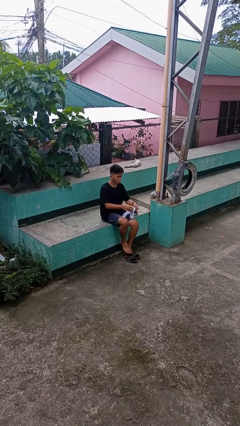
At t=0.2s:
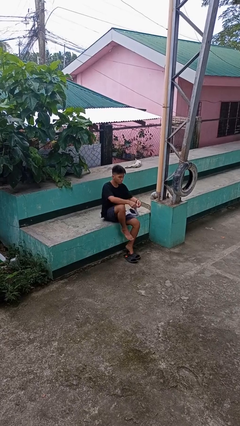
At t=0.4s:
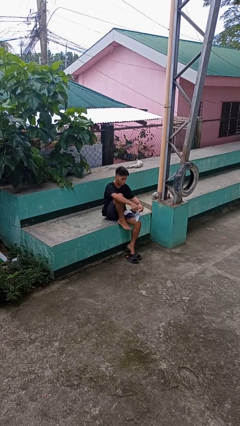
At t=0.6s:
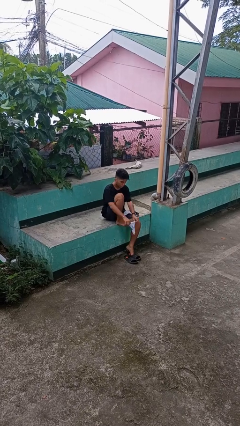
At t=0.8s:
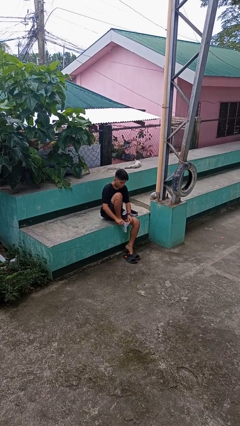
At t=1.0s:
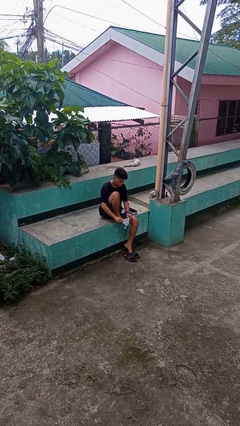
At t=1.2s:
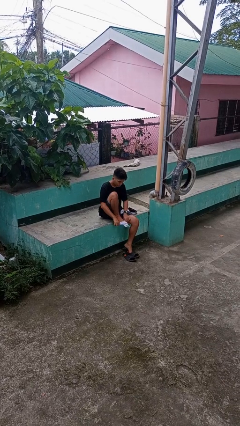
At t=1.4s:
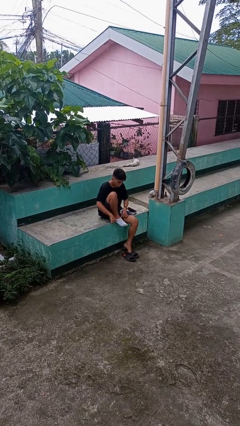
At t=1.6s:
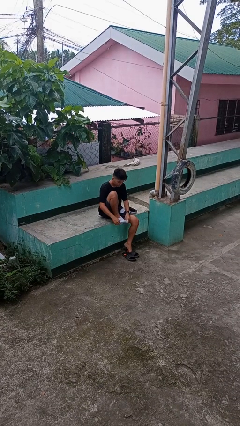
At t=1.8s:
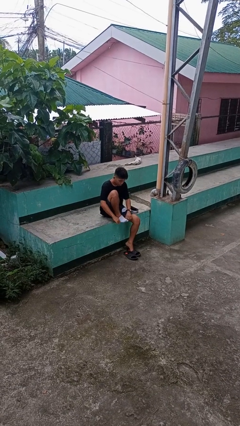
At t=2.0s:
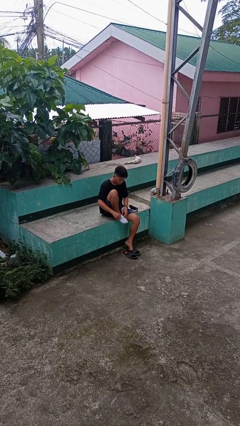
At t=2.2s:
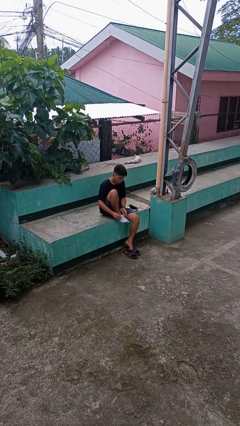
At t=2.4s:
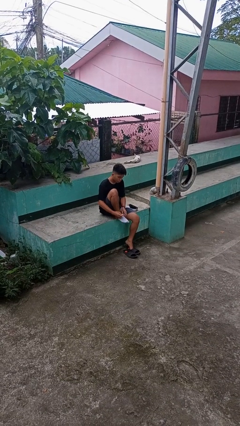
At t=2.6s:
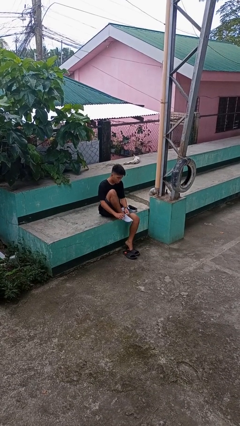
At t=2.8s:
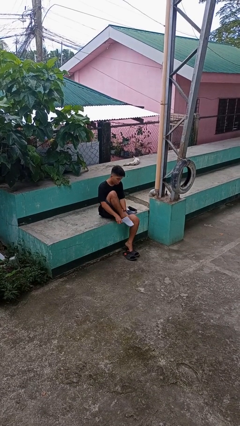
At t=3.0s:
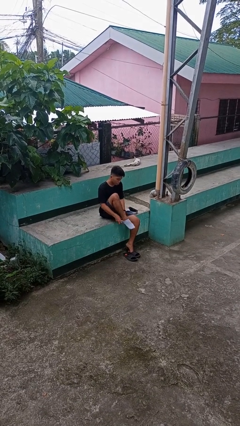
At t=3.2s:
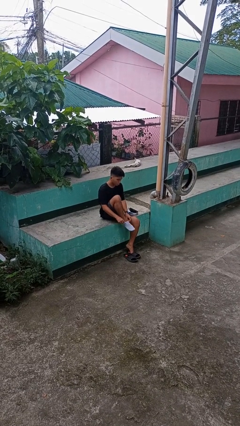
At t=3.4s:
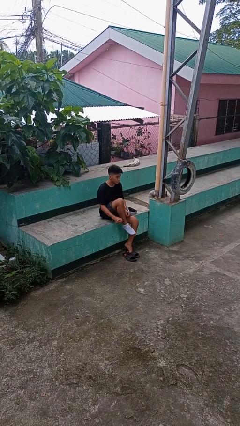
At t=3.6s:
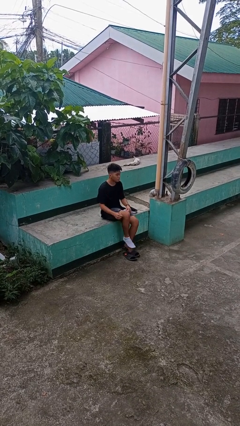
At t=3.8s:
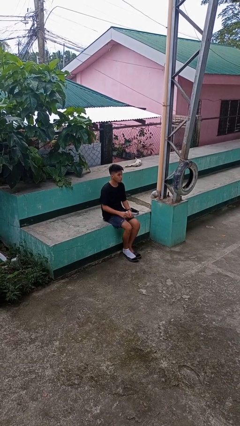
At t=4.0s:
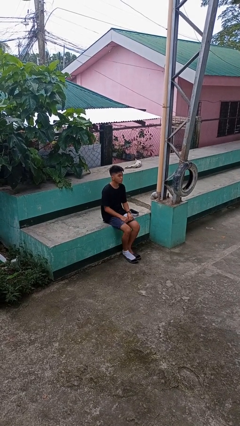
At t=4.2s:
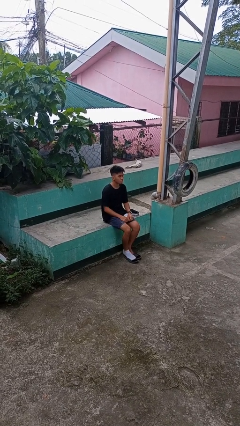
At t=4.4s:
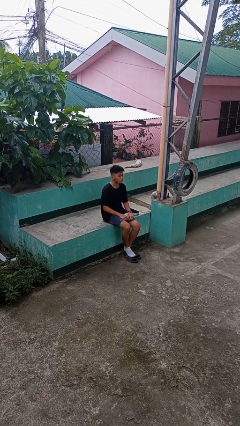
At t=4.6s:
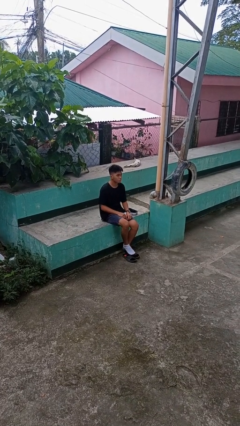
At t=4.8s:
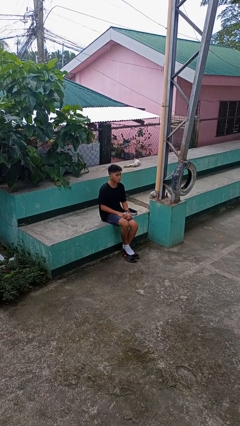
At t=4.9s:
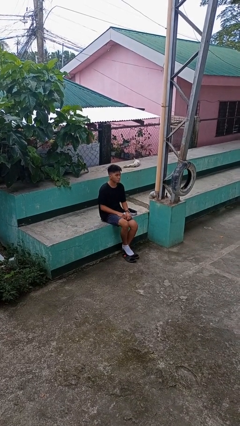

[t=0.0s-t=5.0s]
person puts on socks

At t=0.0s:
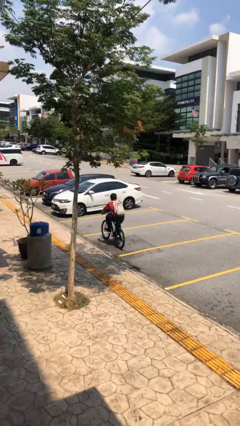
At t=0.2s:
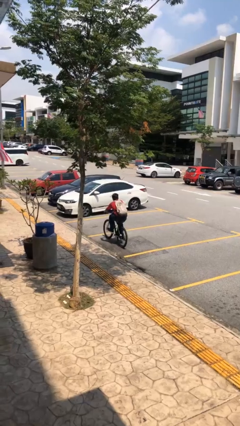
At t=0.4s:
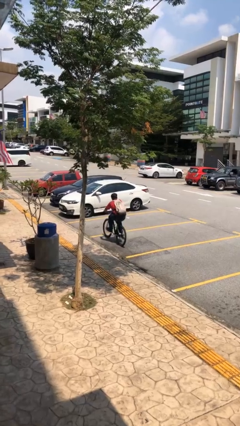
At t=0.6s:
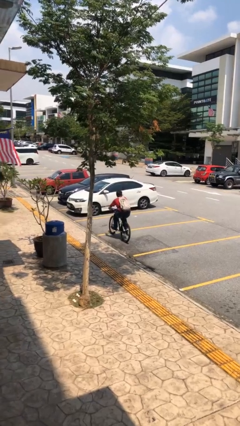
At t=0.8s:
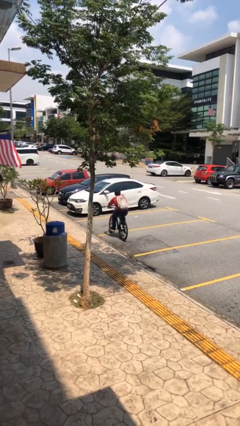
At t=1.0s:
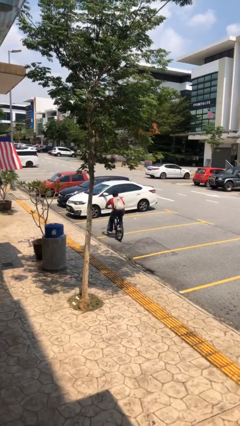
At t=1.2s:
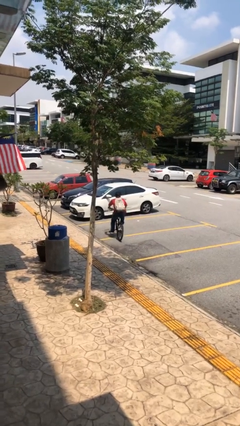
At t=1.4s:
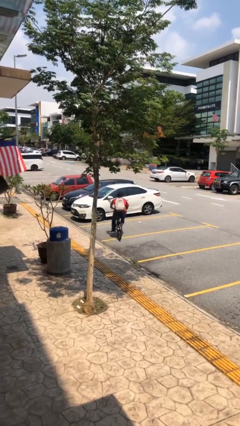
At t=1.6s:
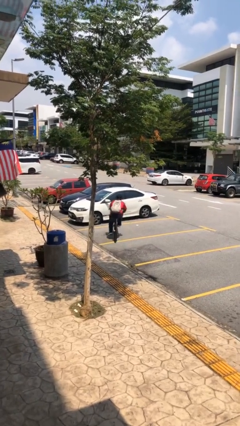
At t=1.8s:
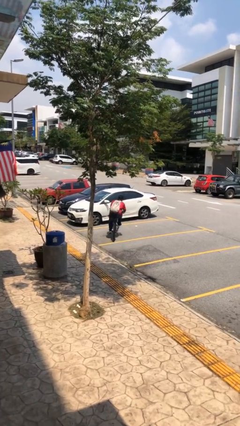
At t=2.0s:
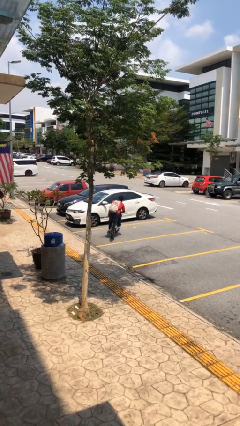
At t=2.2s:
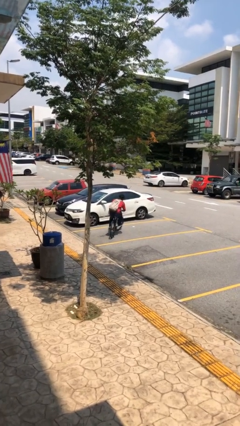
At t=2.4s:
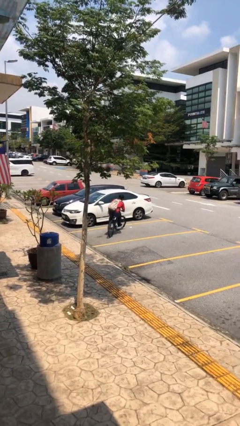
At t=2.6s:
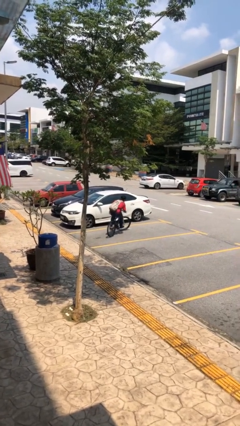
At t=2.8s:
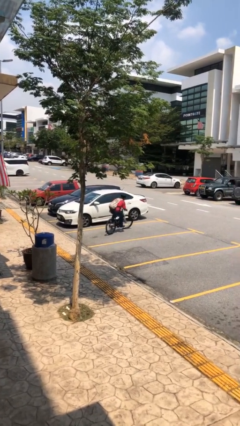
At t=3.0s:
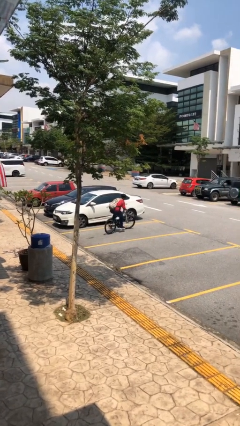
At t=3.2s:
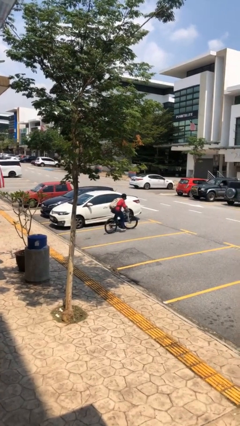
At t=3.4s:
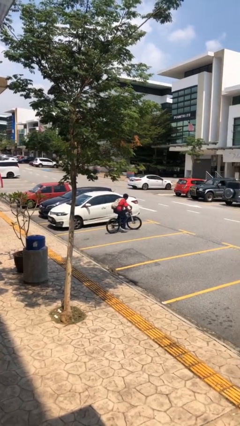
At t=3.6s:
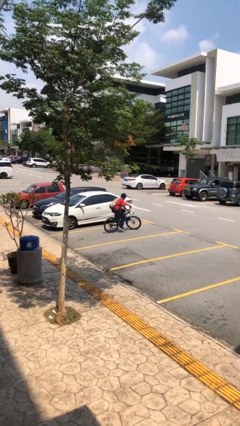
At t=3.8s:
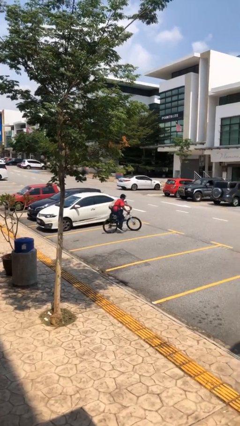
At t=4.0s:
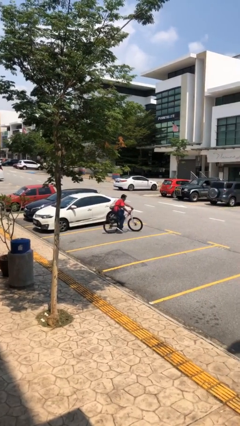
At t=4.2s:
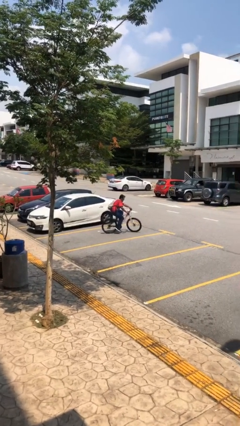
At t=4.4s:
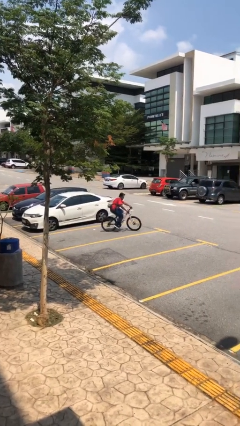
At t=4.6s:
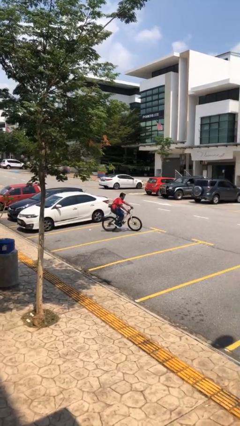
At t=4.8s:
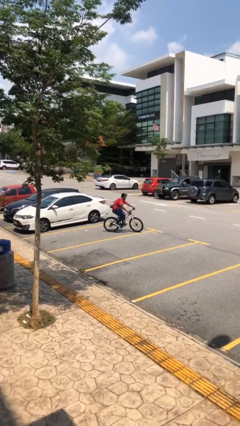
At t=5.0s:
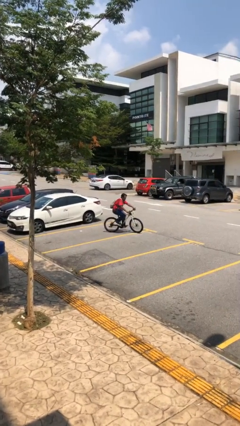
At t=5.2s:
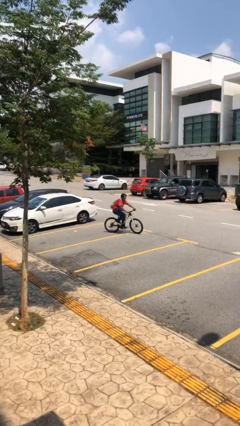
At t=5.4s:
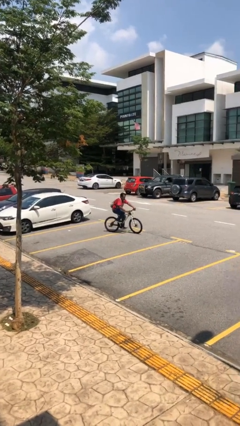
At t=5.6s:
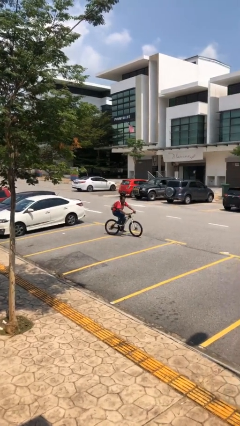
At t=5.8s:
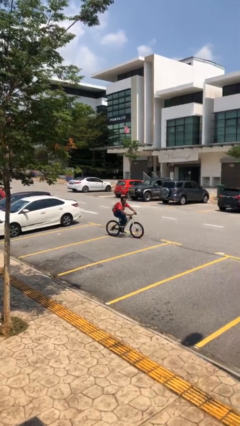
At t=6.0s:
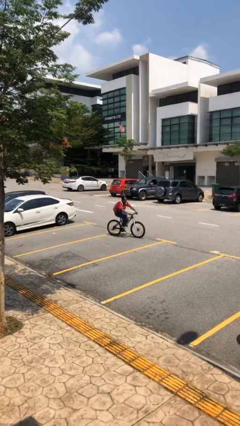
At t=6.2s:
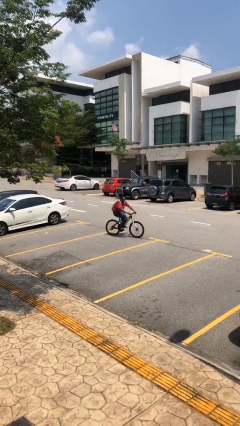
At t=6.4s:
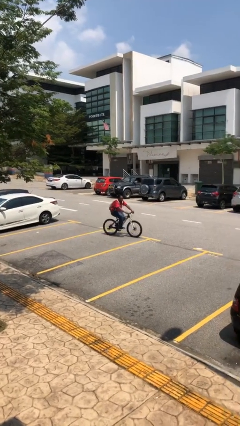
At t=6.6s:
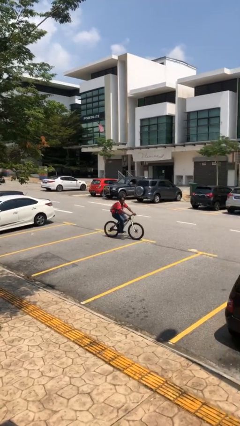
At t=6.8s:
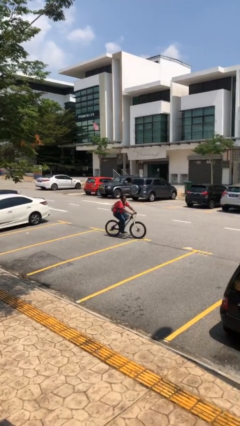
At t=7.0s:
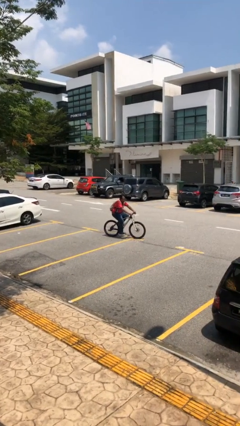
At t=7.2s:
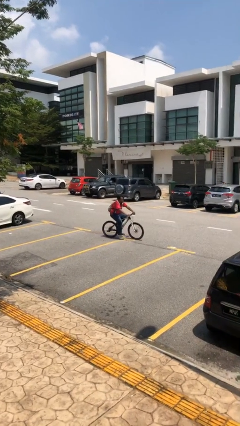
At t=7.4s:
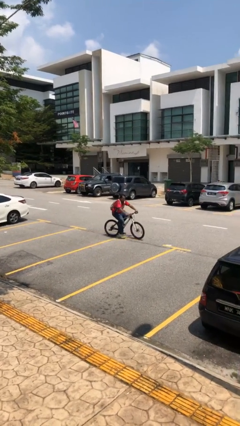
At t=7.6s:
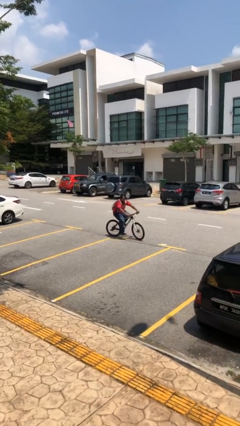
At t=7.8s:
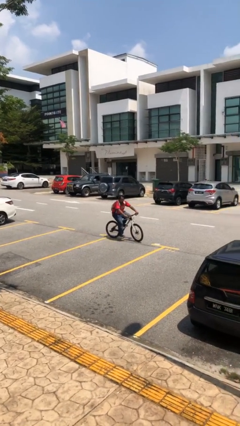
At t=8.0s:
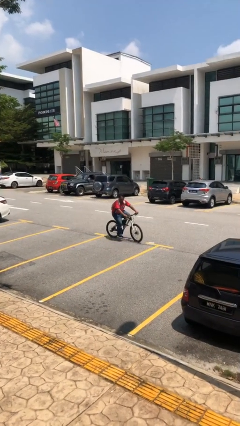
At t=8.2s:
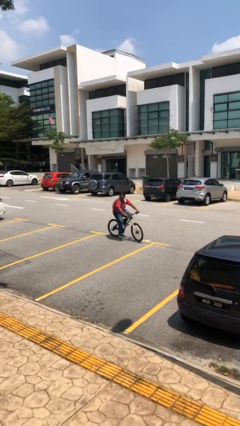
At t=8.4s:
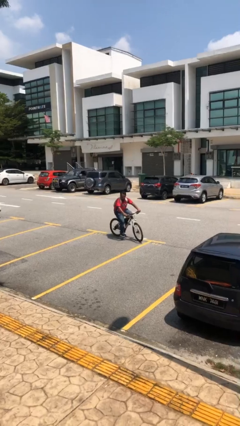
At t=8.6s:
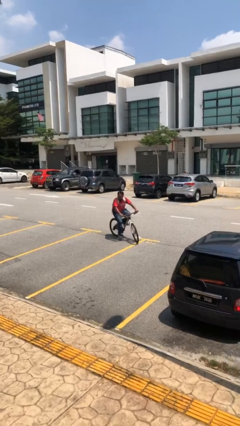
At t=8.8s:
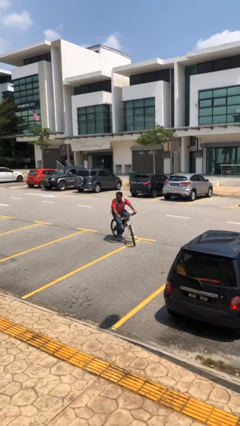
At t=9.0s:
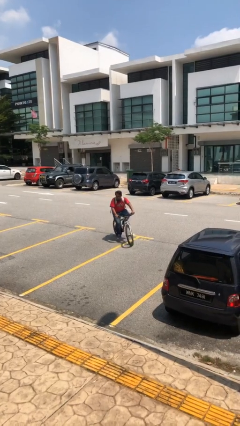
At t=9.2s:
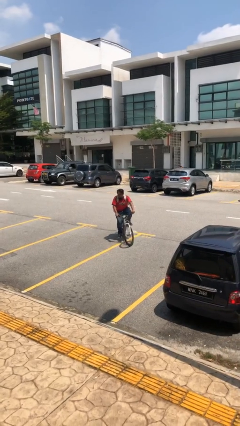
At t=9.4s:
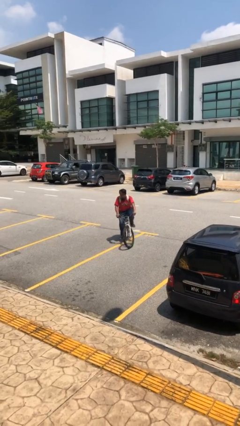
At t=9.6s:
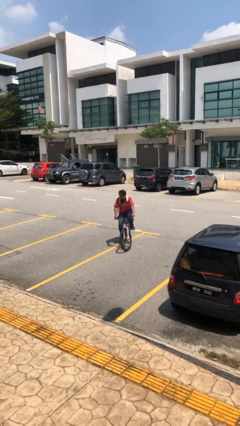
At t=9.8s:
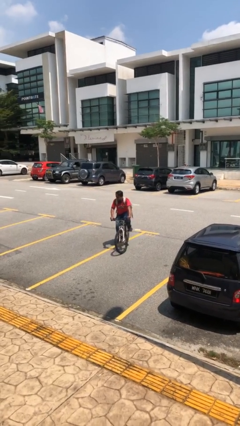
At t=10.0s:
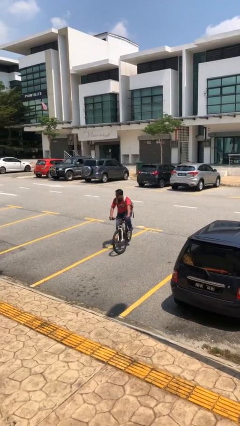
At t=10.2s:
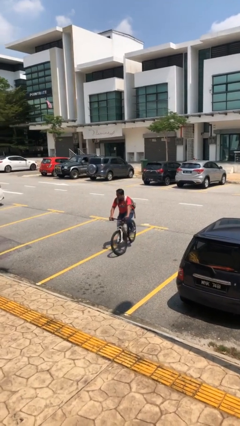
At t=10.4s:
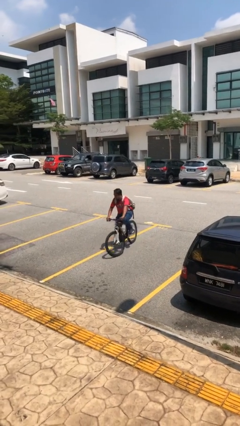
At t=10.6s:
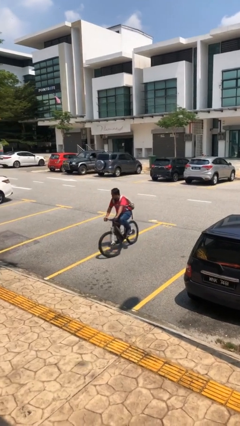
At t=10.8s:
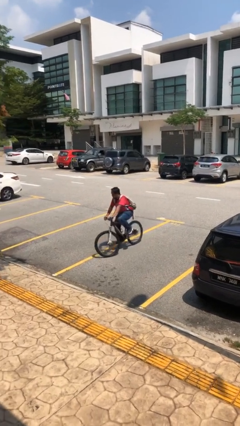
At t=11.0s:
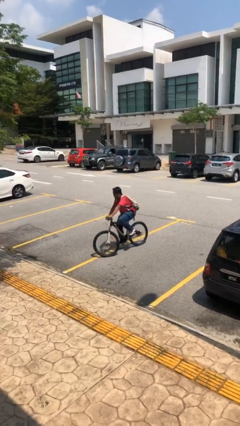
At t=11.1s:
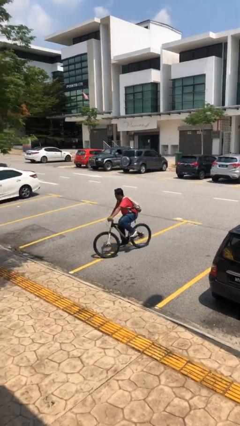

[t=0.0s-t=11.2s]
person rides bicycle

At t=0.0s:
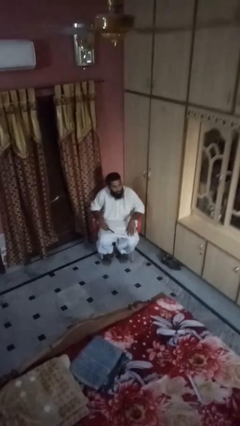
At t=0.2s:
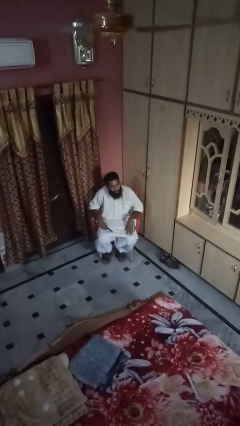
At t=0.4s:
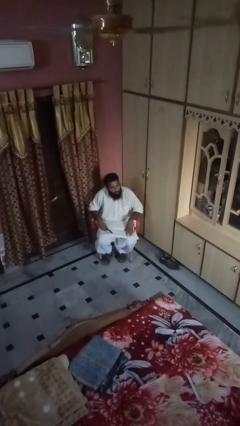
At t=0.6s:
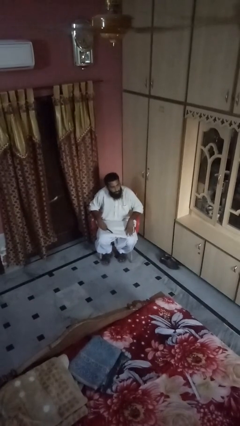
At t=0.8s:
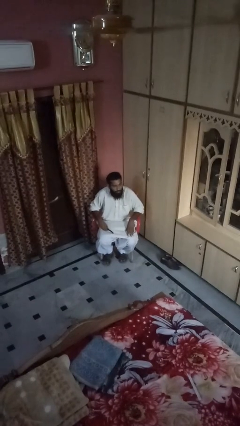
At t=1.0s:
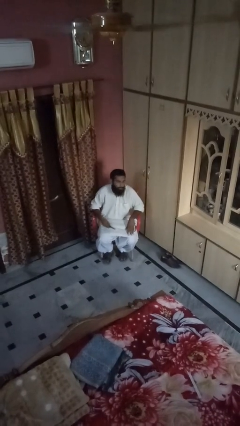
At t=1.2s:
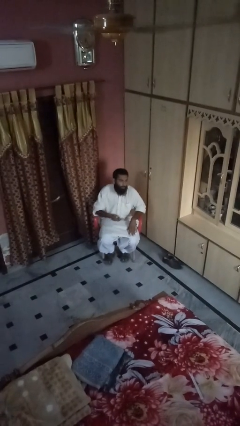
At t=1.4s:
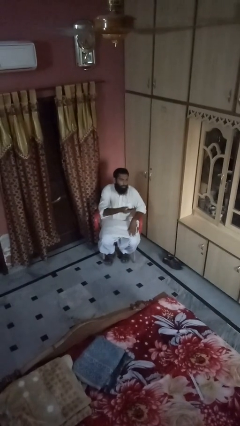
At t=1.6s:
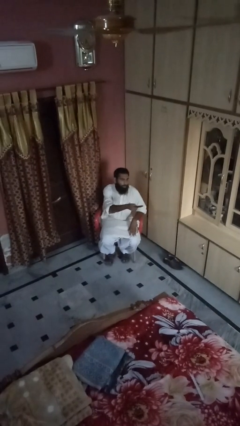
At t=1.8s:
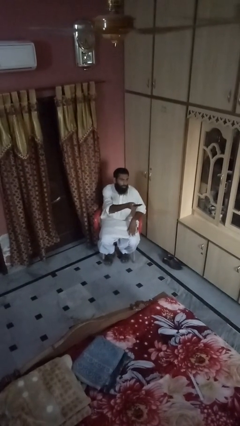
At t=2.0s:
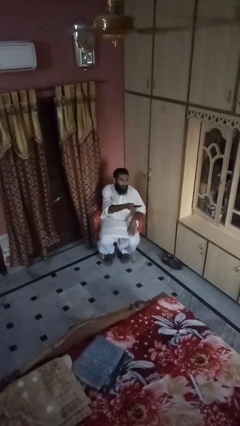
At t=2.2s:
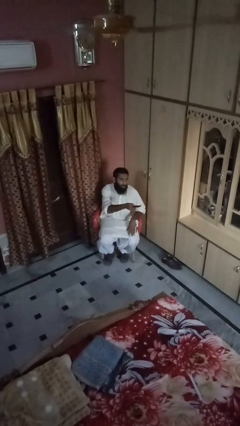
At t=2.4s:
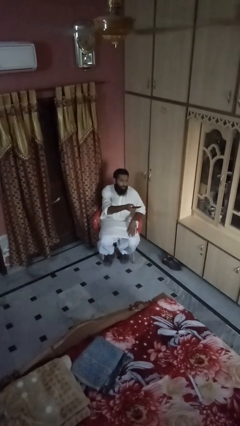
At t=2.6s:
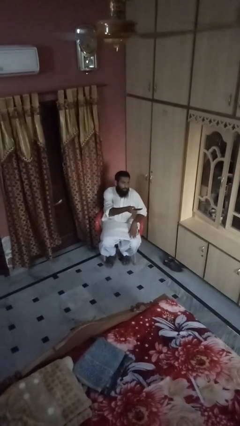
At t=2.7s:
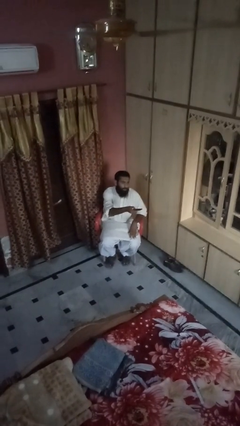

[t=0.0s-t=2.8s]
person uses television remote
